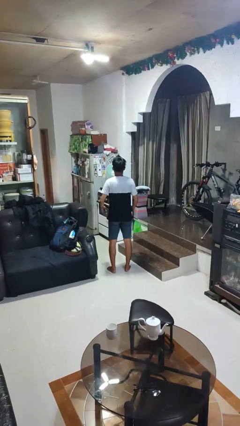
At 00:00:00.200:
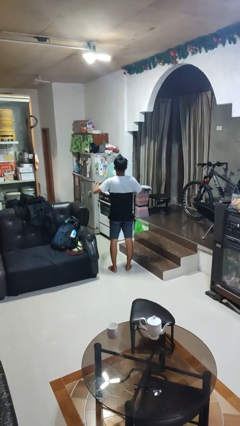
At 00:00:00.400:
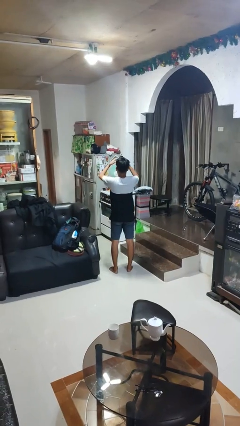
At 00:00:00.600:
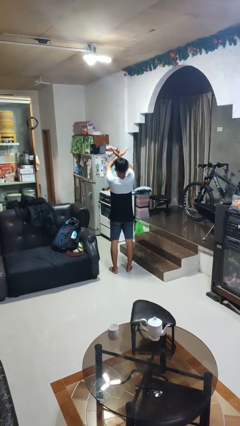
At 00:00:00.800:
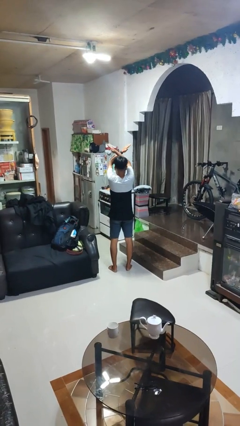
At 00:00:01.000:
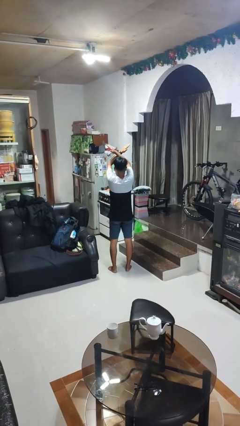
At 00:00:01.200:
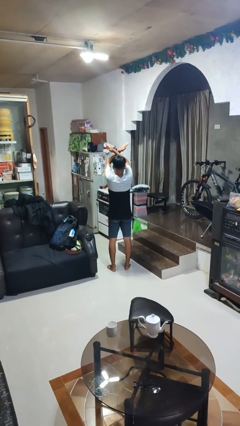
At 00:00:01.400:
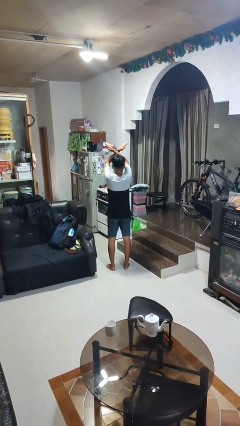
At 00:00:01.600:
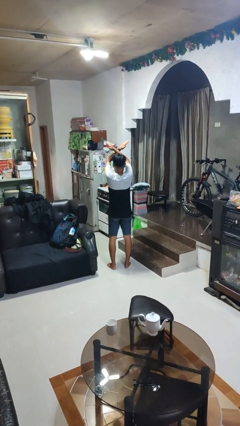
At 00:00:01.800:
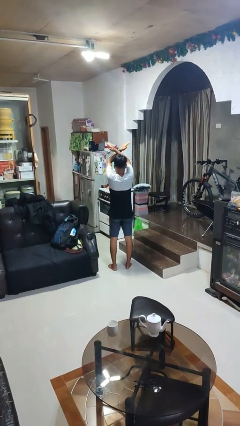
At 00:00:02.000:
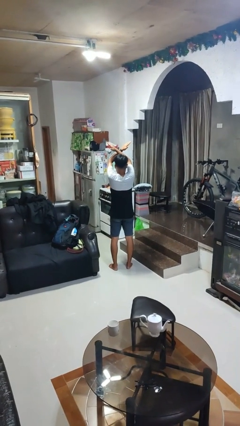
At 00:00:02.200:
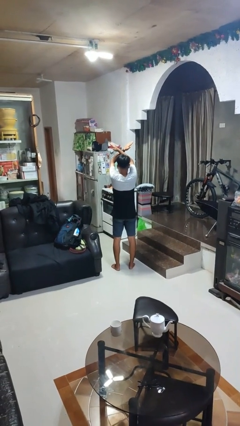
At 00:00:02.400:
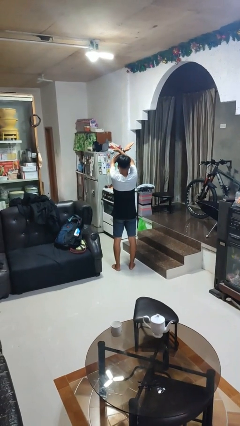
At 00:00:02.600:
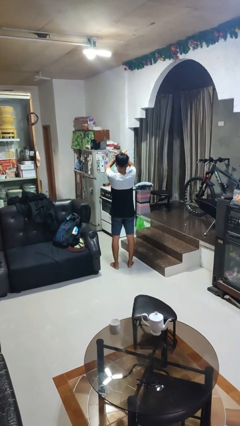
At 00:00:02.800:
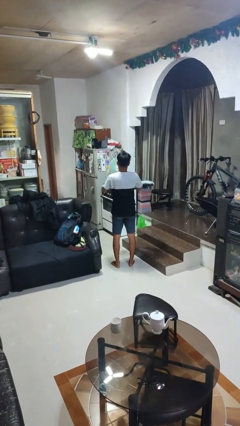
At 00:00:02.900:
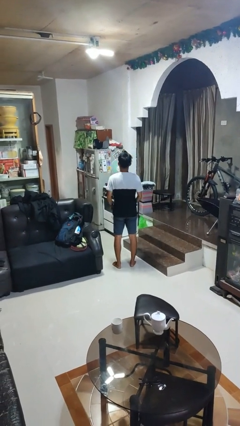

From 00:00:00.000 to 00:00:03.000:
person gestures arms x

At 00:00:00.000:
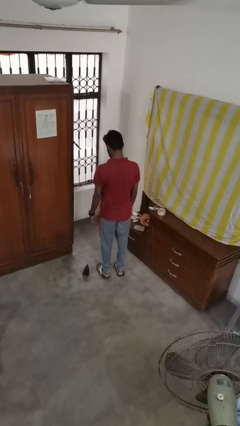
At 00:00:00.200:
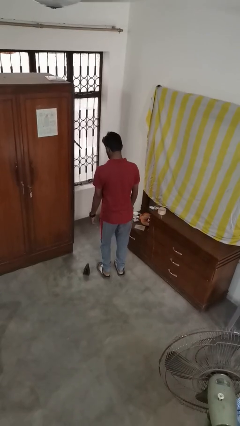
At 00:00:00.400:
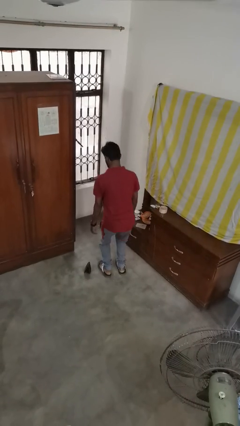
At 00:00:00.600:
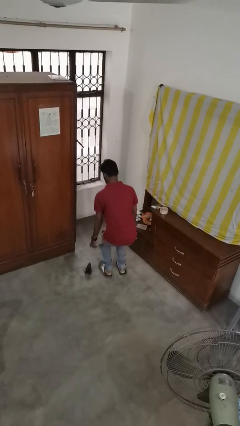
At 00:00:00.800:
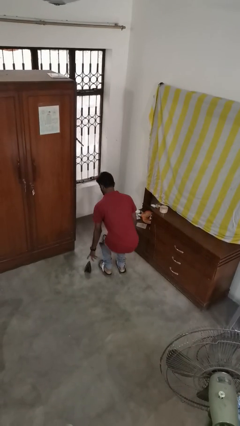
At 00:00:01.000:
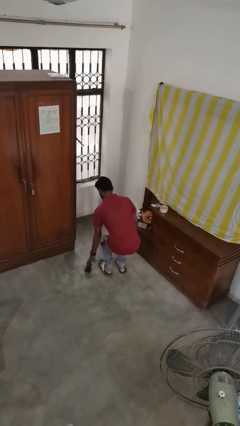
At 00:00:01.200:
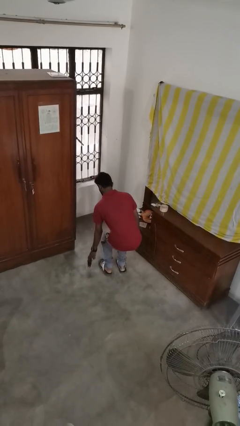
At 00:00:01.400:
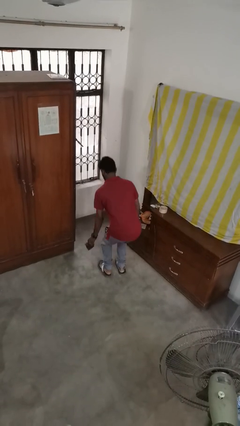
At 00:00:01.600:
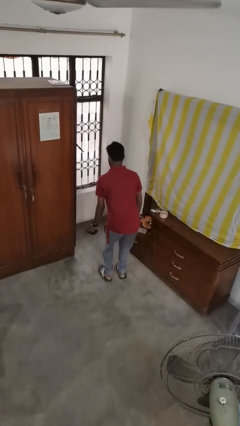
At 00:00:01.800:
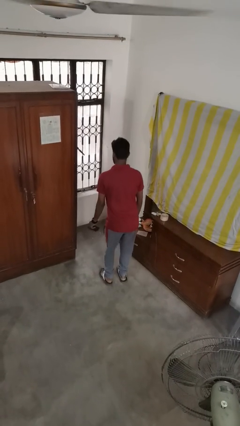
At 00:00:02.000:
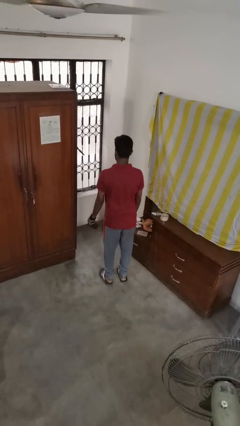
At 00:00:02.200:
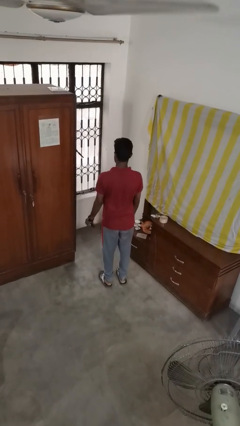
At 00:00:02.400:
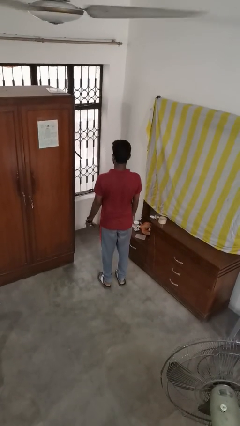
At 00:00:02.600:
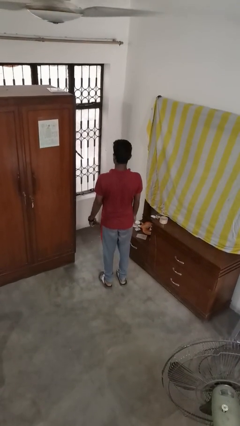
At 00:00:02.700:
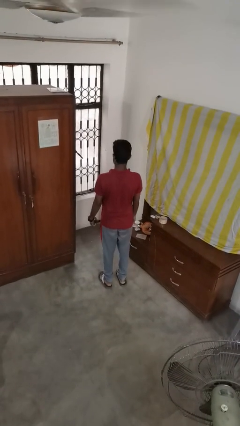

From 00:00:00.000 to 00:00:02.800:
person picks up object from floor

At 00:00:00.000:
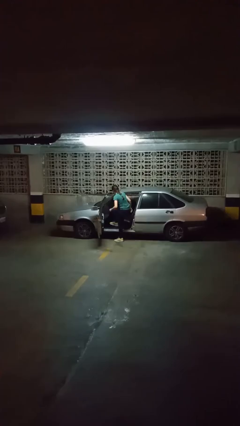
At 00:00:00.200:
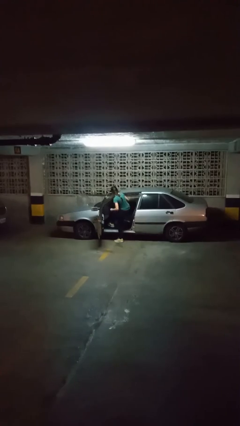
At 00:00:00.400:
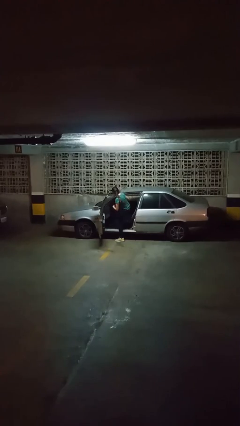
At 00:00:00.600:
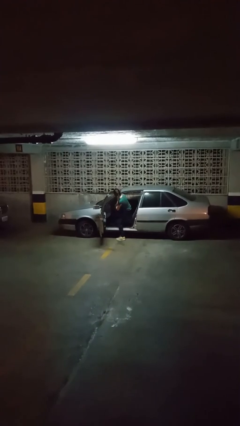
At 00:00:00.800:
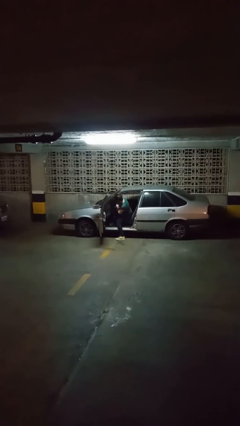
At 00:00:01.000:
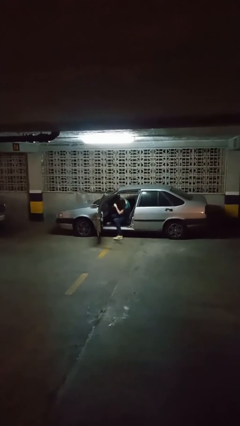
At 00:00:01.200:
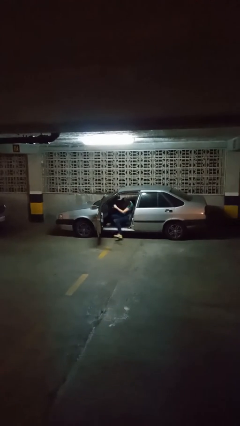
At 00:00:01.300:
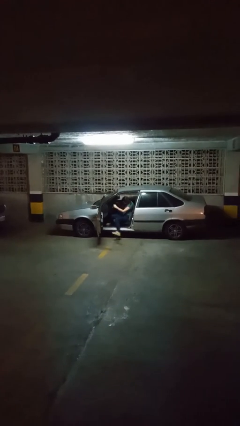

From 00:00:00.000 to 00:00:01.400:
person enters car

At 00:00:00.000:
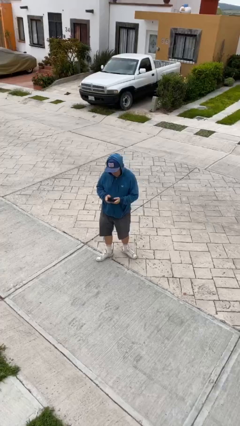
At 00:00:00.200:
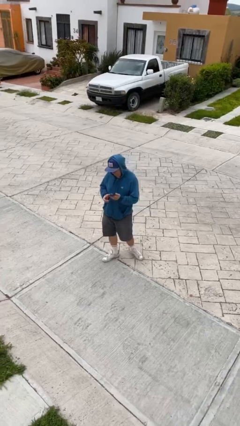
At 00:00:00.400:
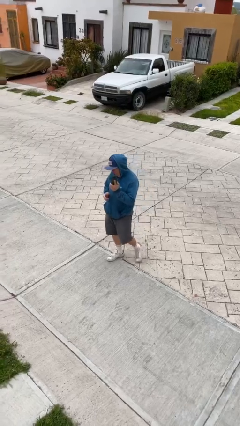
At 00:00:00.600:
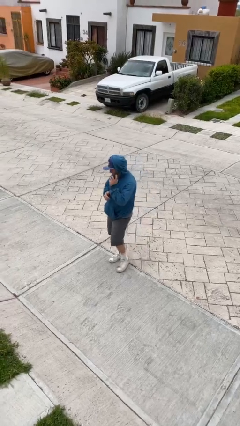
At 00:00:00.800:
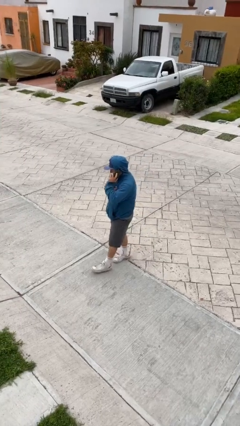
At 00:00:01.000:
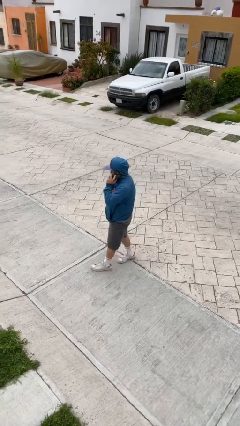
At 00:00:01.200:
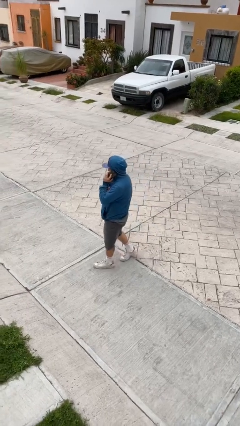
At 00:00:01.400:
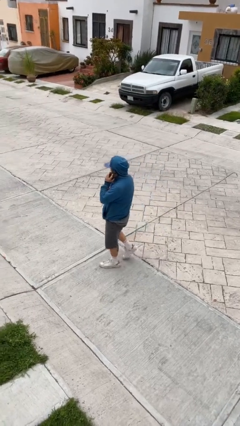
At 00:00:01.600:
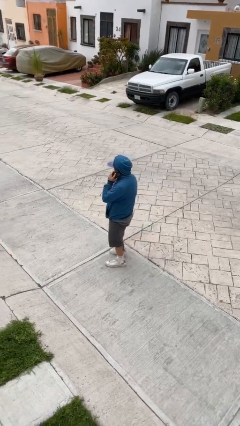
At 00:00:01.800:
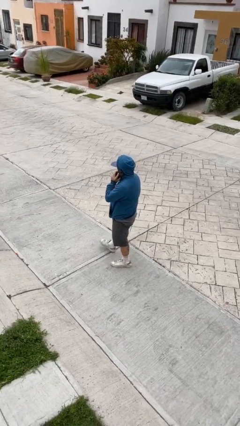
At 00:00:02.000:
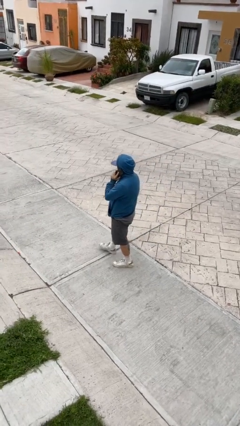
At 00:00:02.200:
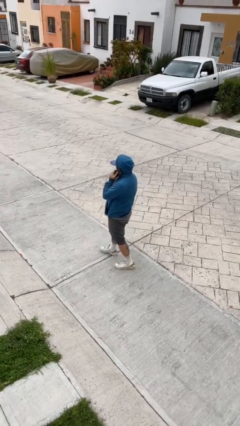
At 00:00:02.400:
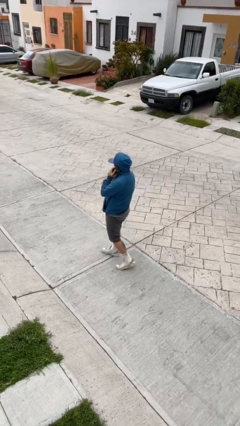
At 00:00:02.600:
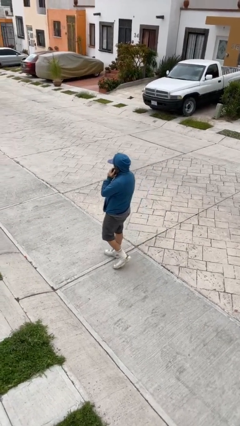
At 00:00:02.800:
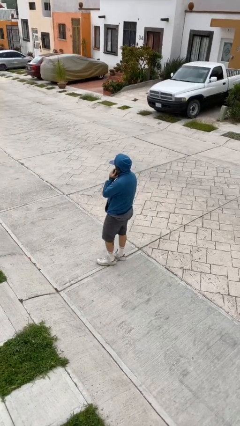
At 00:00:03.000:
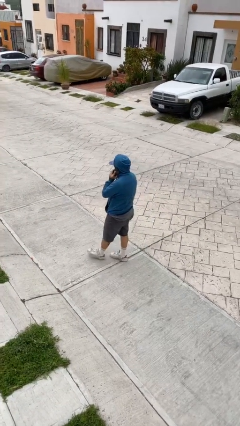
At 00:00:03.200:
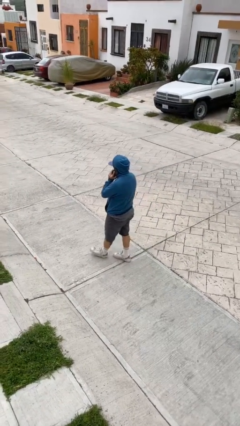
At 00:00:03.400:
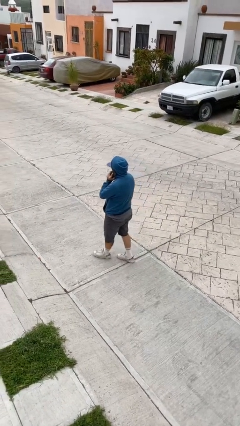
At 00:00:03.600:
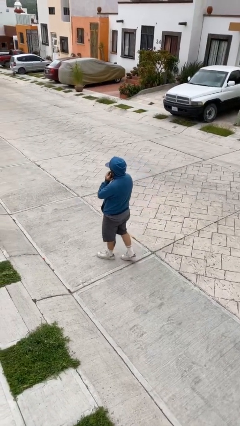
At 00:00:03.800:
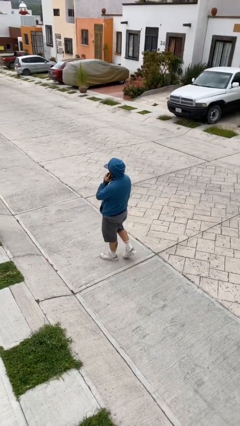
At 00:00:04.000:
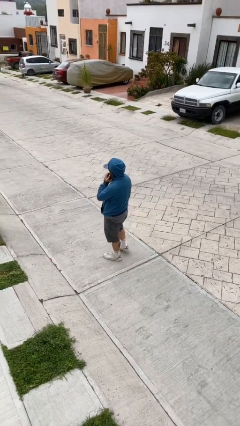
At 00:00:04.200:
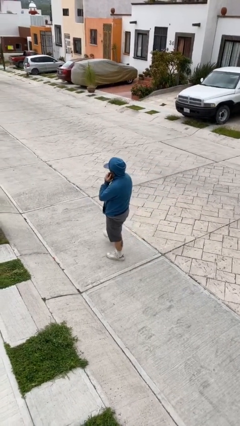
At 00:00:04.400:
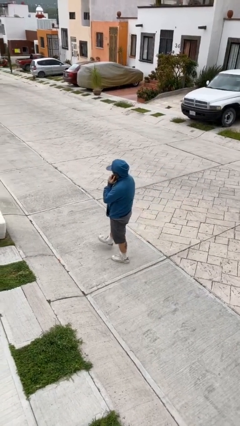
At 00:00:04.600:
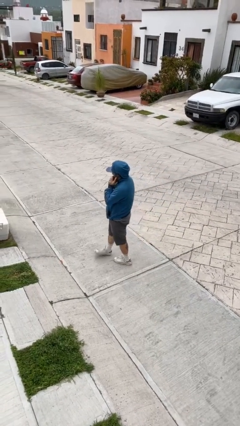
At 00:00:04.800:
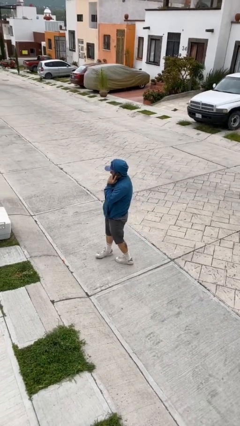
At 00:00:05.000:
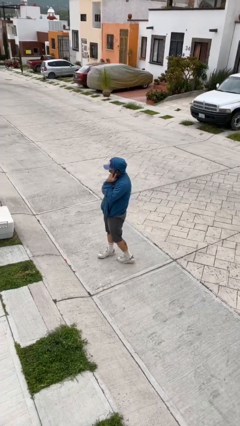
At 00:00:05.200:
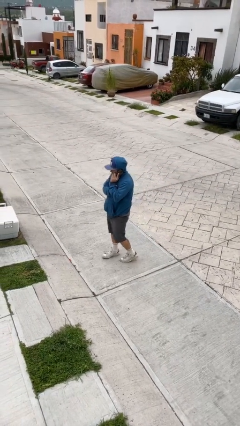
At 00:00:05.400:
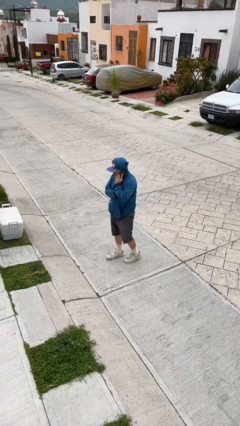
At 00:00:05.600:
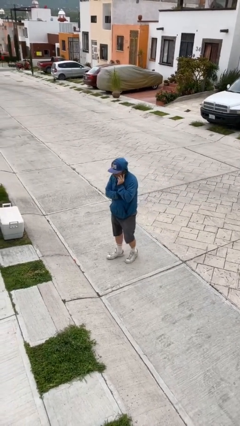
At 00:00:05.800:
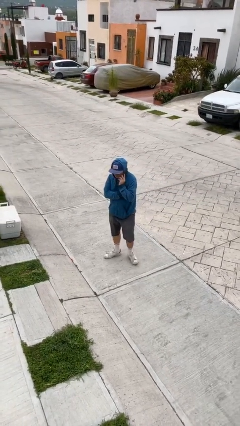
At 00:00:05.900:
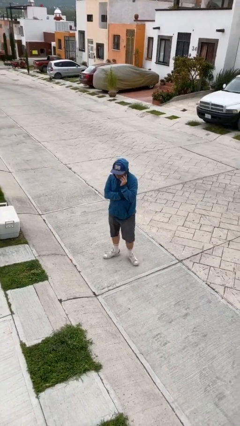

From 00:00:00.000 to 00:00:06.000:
person talks on phone

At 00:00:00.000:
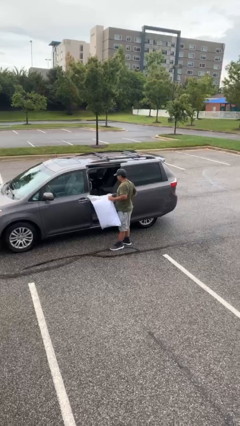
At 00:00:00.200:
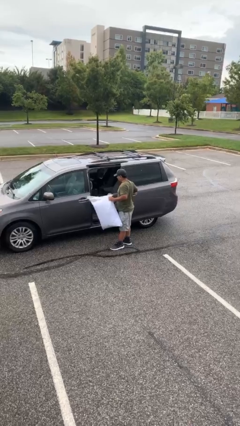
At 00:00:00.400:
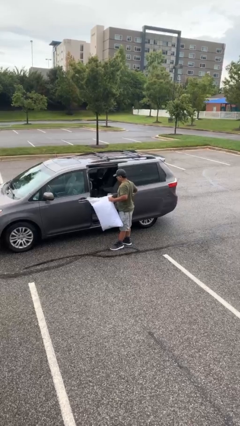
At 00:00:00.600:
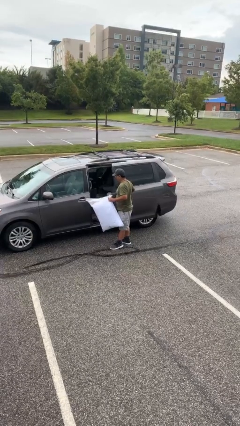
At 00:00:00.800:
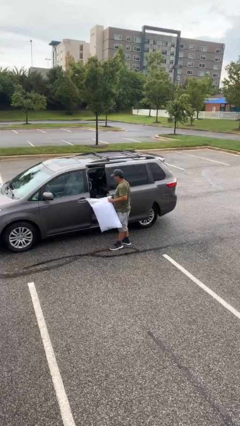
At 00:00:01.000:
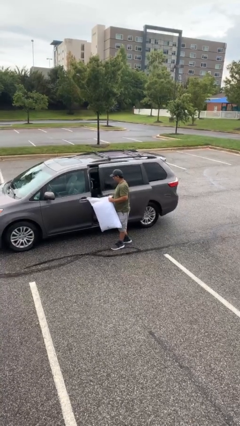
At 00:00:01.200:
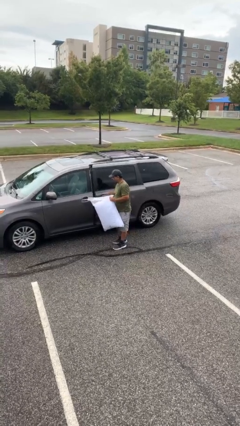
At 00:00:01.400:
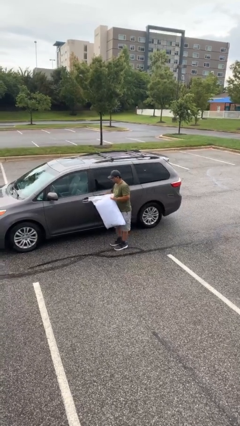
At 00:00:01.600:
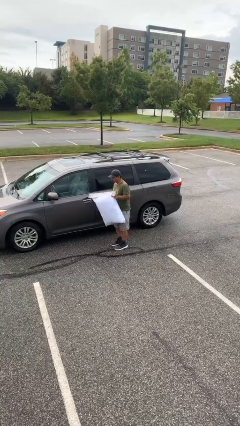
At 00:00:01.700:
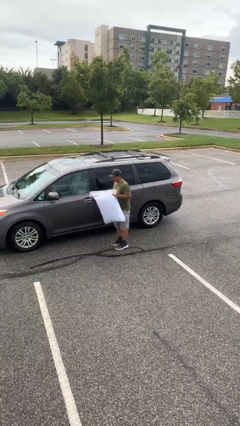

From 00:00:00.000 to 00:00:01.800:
person closes car door

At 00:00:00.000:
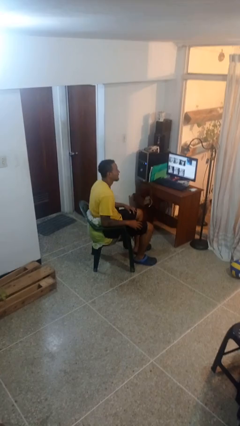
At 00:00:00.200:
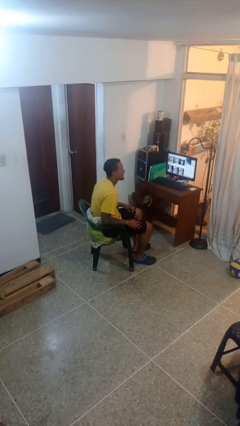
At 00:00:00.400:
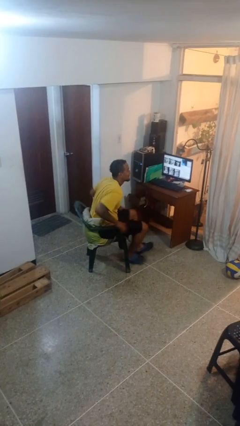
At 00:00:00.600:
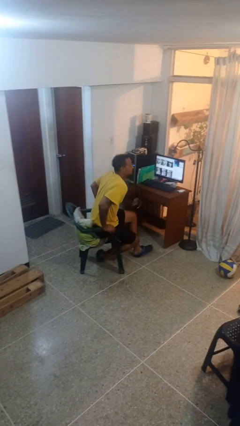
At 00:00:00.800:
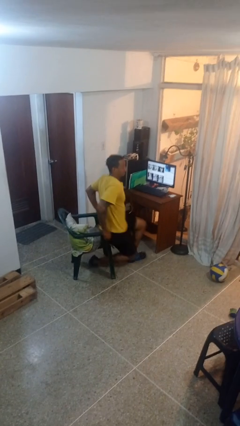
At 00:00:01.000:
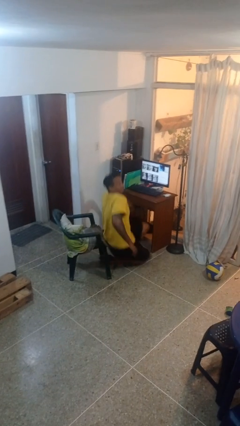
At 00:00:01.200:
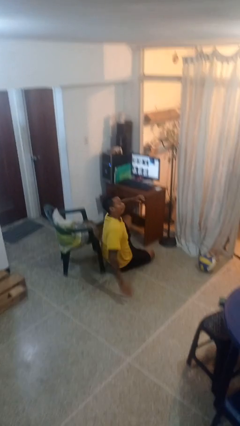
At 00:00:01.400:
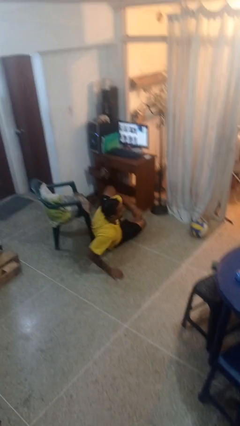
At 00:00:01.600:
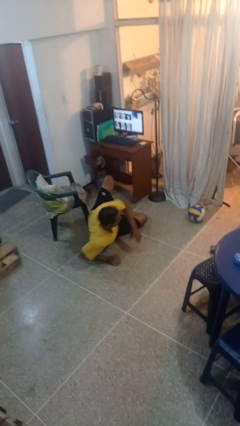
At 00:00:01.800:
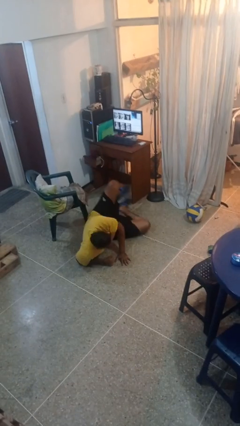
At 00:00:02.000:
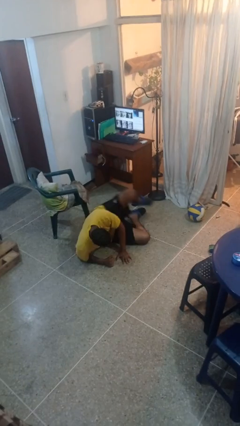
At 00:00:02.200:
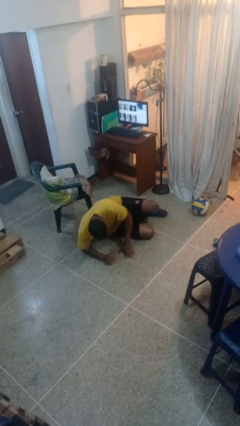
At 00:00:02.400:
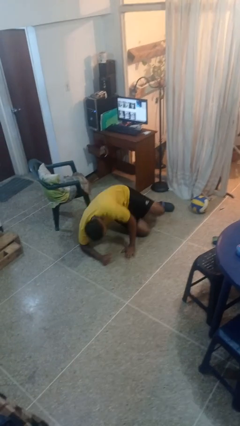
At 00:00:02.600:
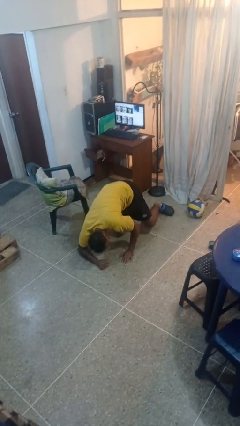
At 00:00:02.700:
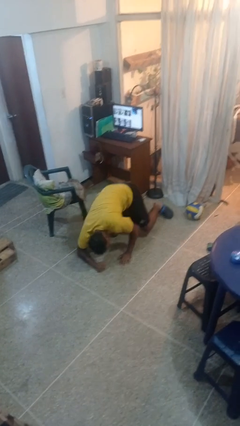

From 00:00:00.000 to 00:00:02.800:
person falls from chair
